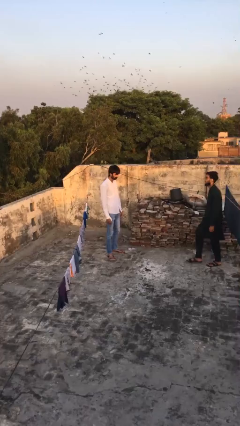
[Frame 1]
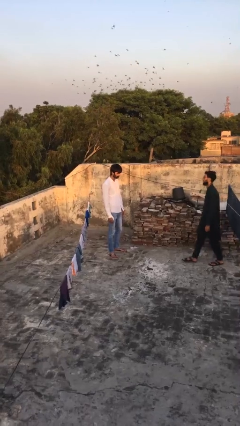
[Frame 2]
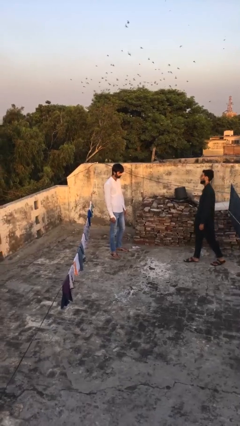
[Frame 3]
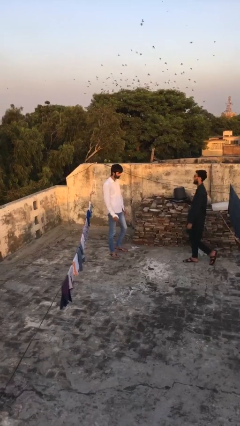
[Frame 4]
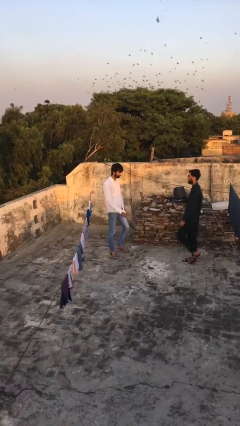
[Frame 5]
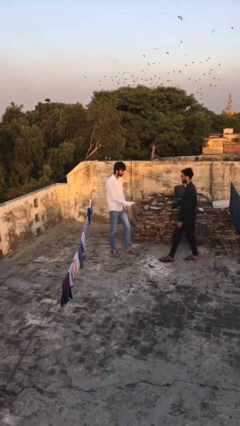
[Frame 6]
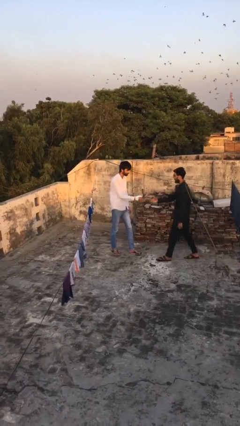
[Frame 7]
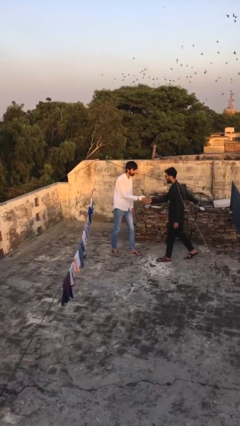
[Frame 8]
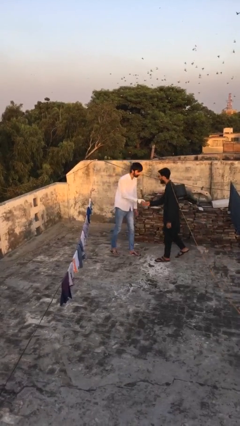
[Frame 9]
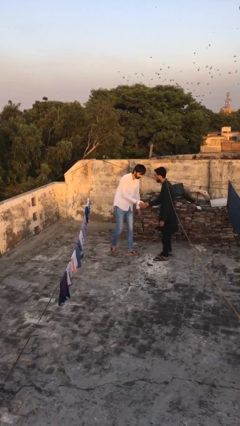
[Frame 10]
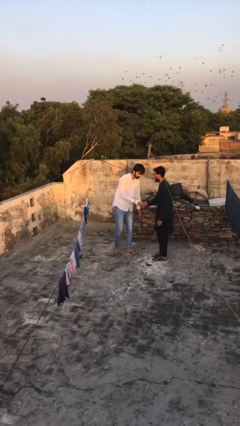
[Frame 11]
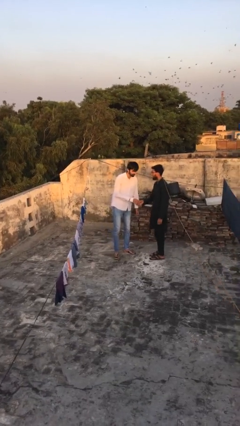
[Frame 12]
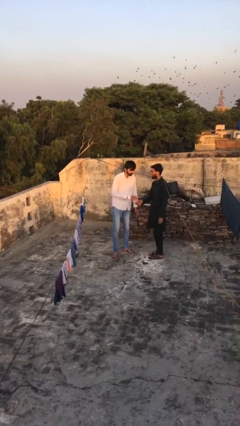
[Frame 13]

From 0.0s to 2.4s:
person shakes hand

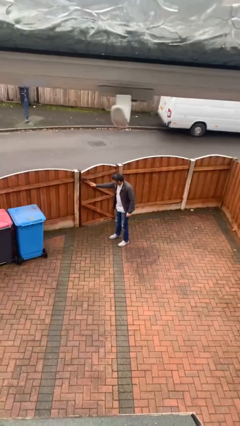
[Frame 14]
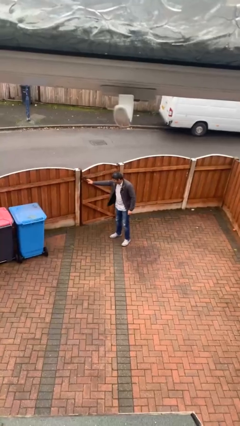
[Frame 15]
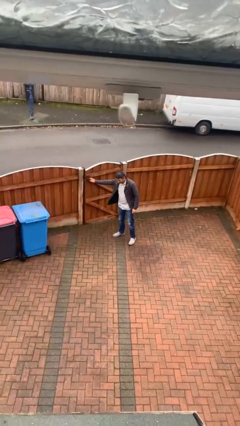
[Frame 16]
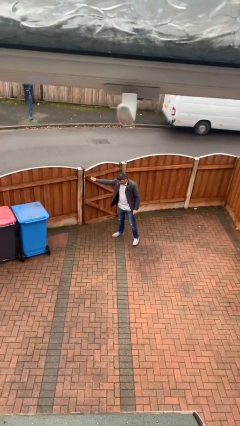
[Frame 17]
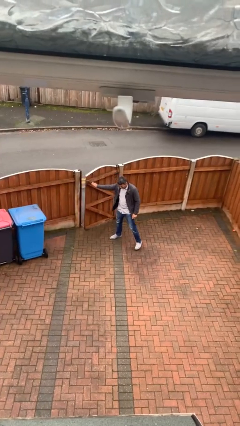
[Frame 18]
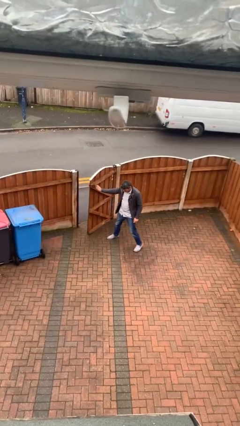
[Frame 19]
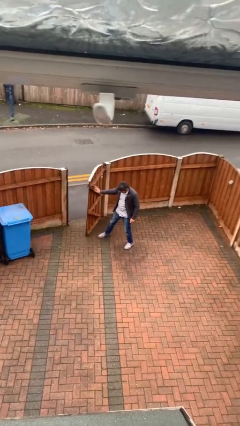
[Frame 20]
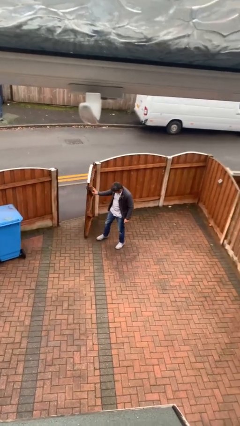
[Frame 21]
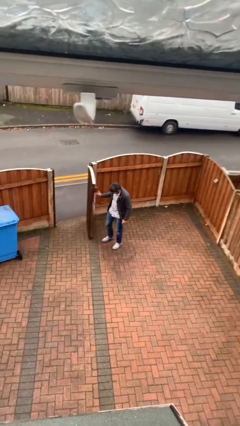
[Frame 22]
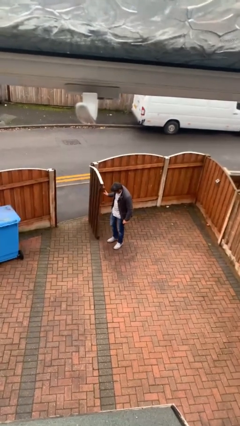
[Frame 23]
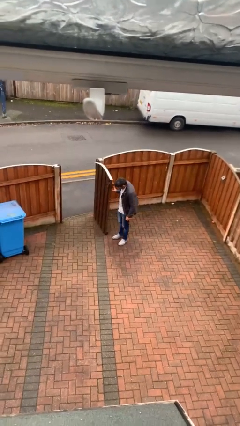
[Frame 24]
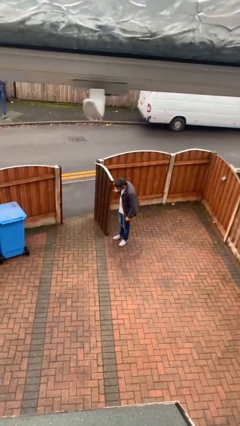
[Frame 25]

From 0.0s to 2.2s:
person opens facility door

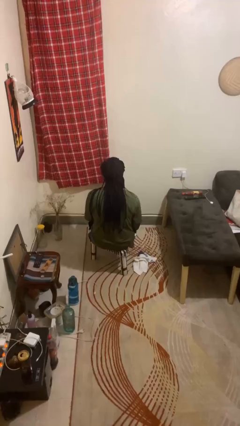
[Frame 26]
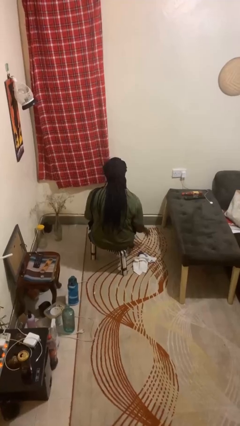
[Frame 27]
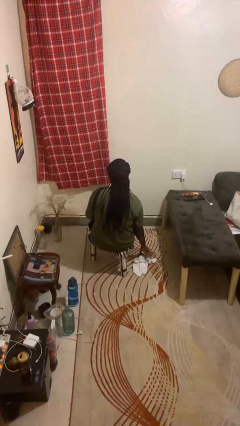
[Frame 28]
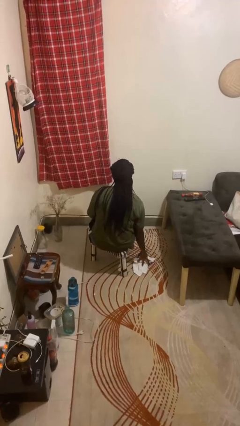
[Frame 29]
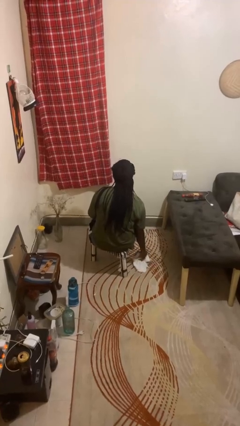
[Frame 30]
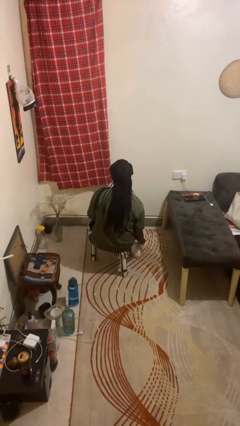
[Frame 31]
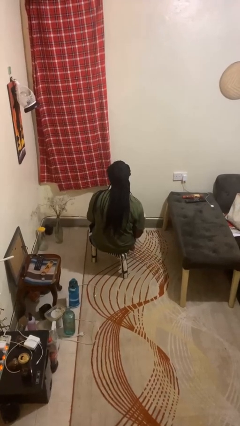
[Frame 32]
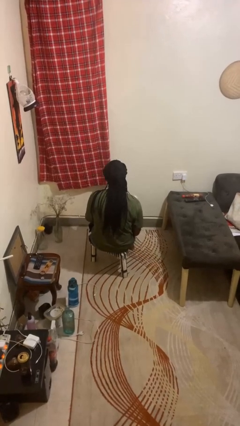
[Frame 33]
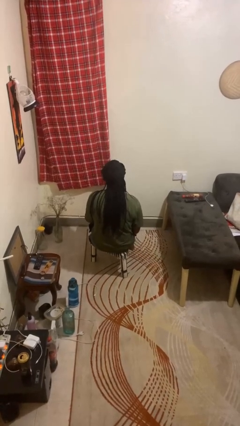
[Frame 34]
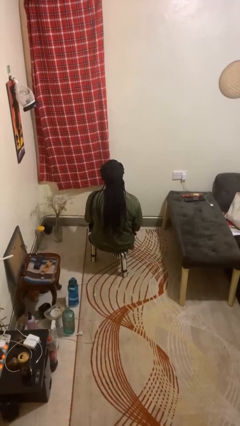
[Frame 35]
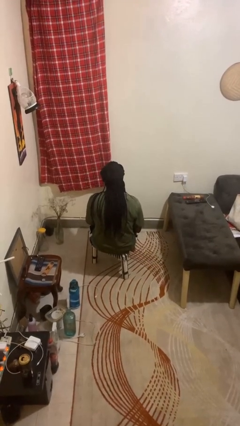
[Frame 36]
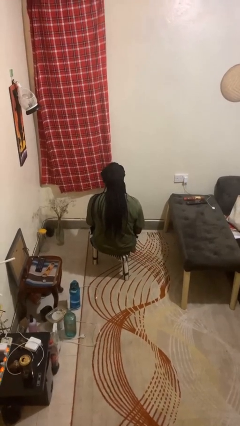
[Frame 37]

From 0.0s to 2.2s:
person picks up object from floor

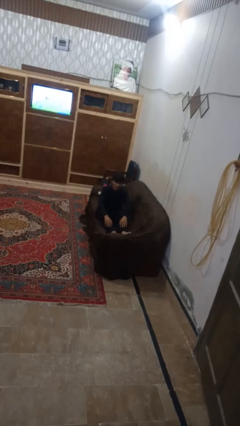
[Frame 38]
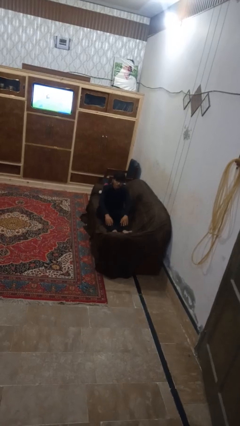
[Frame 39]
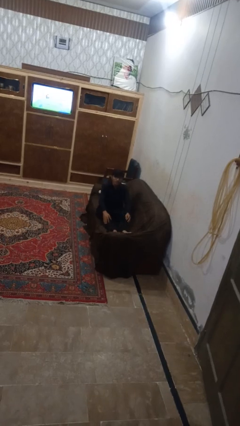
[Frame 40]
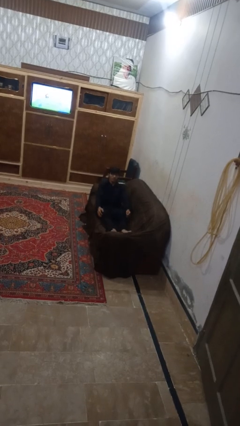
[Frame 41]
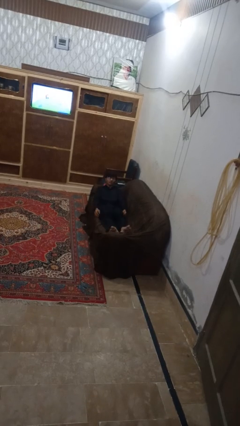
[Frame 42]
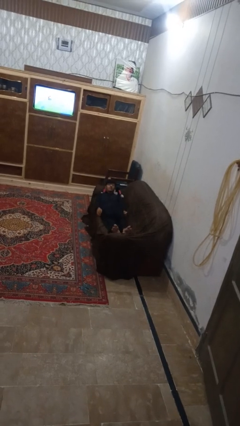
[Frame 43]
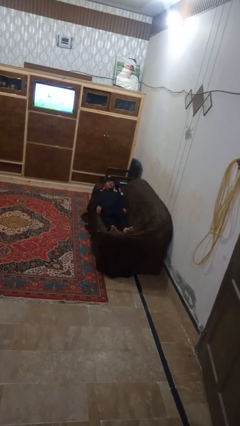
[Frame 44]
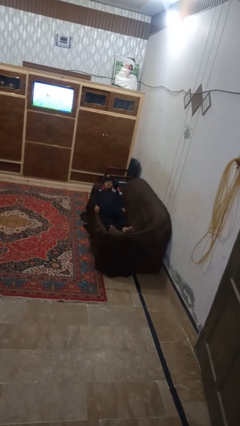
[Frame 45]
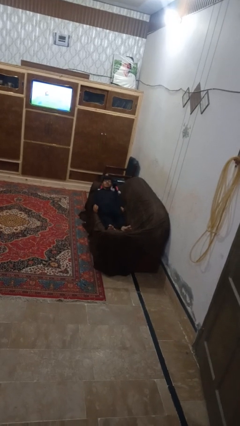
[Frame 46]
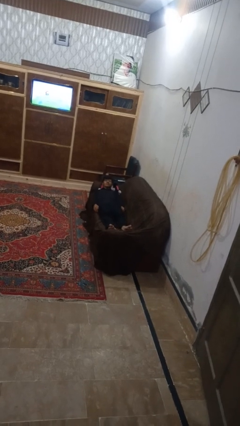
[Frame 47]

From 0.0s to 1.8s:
person lies down on couch

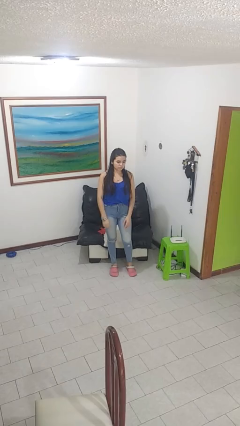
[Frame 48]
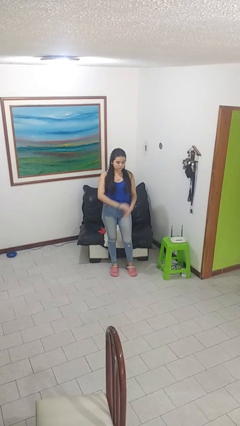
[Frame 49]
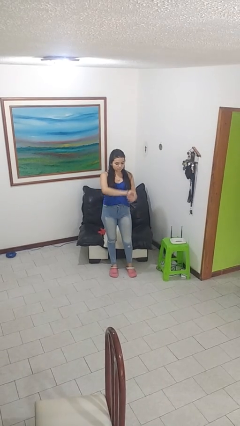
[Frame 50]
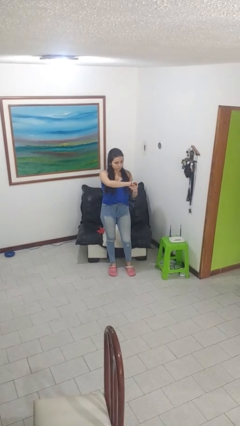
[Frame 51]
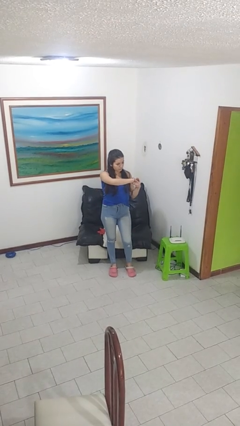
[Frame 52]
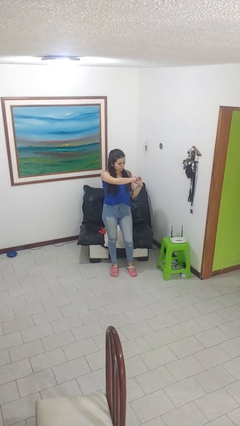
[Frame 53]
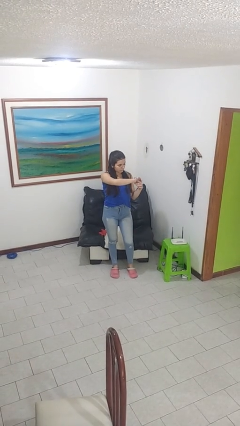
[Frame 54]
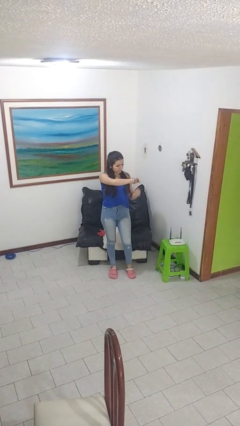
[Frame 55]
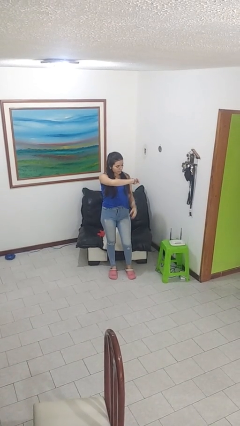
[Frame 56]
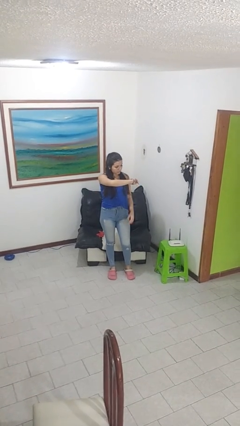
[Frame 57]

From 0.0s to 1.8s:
person looks at wristwatch

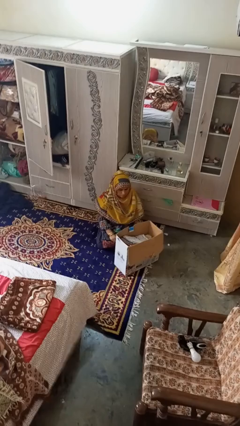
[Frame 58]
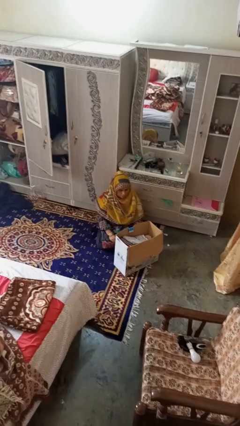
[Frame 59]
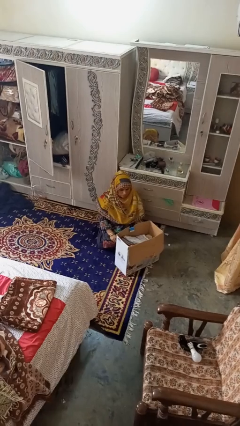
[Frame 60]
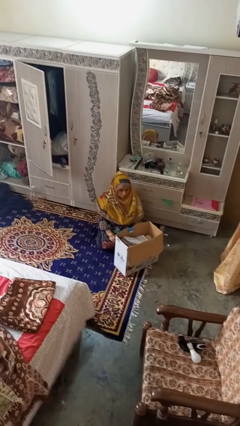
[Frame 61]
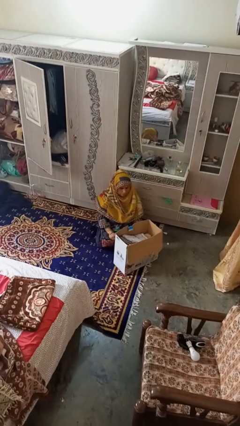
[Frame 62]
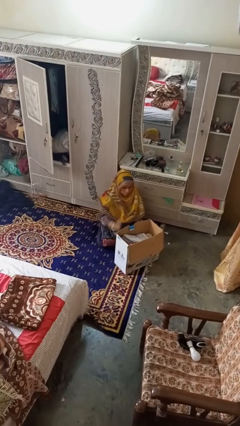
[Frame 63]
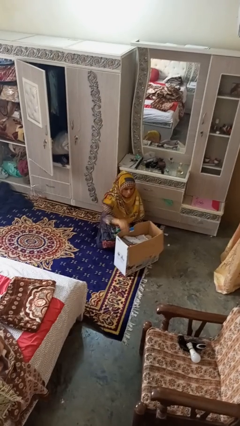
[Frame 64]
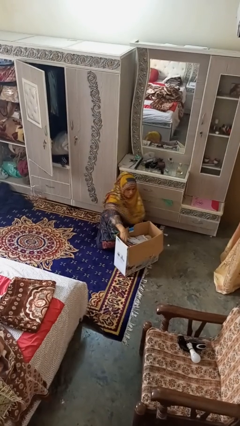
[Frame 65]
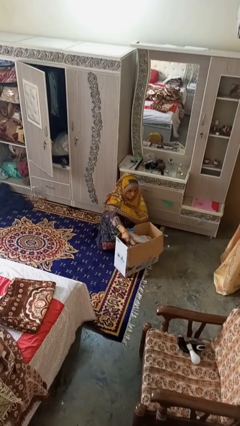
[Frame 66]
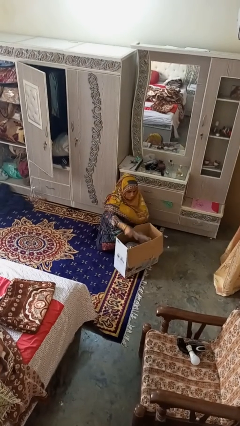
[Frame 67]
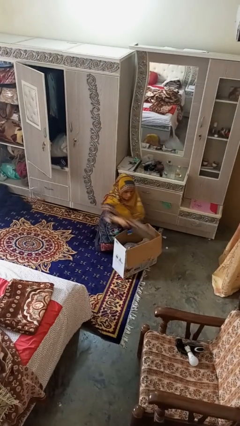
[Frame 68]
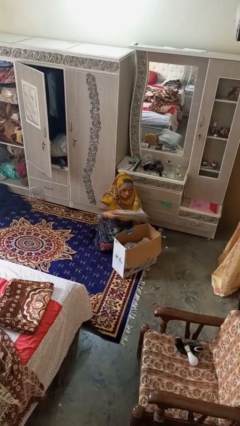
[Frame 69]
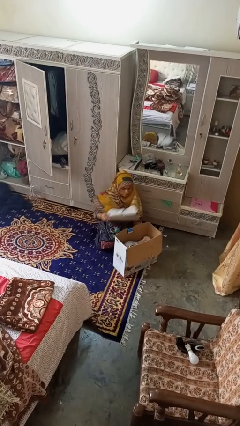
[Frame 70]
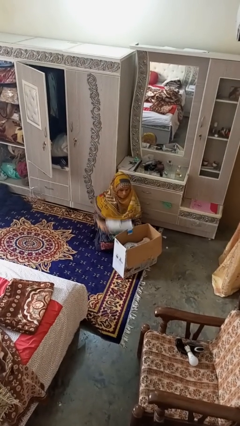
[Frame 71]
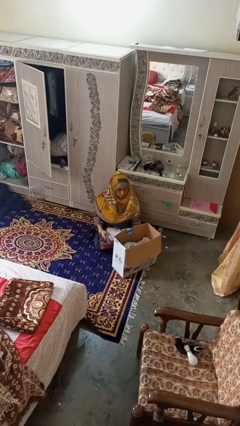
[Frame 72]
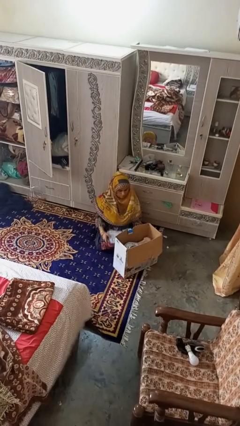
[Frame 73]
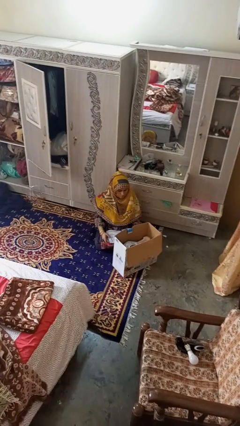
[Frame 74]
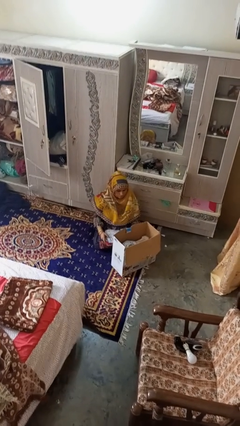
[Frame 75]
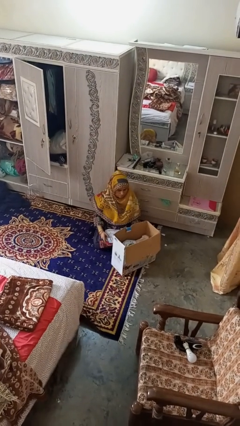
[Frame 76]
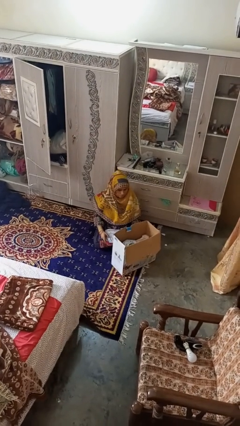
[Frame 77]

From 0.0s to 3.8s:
person takes object from box

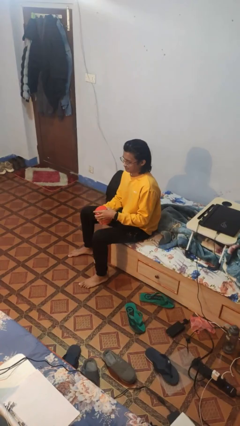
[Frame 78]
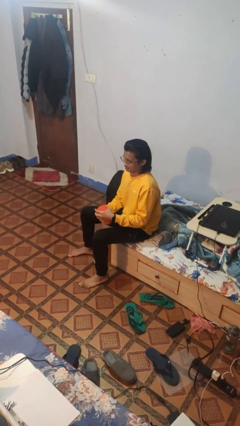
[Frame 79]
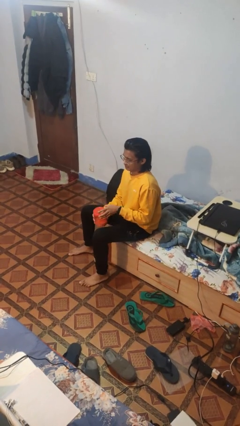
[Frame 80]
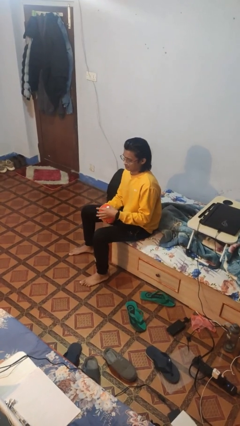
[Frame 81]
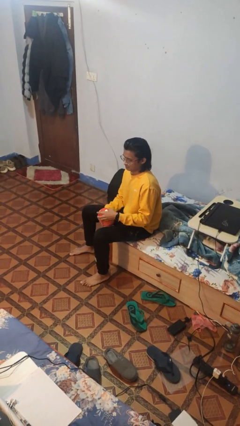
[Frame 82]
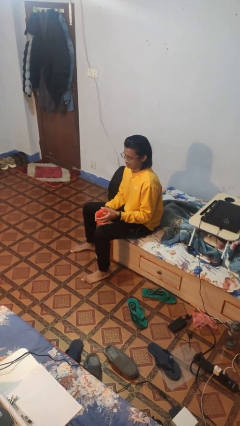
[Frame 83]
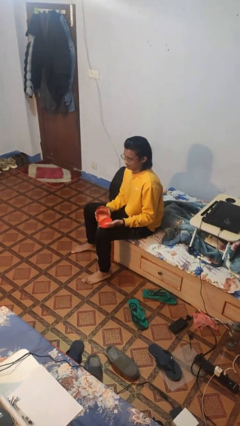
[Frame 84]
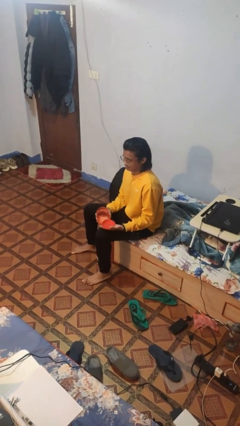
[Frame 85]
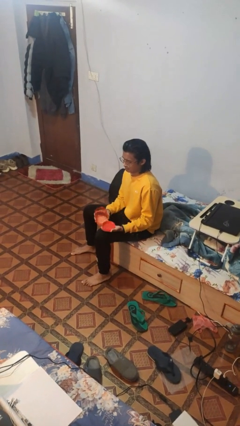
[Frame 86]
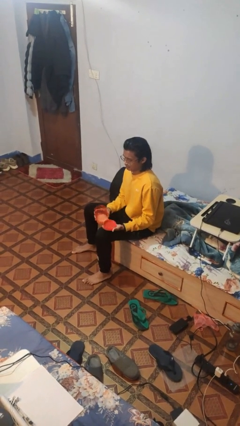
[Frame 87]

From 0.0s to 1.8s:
person opens jar

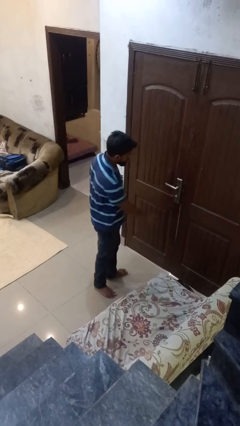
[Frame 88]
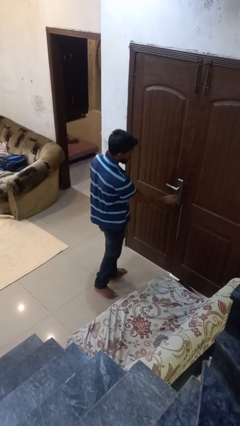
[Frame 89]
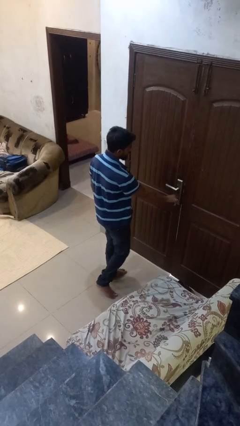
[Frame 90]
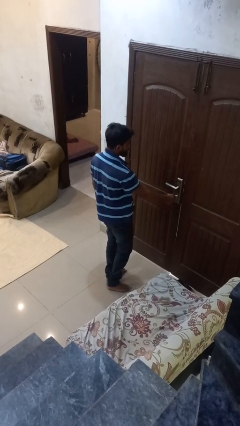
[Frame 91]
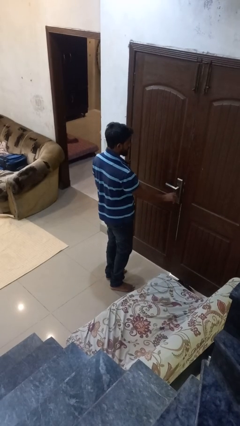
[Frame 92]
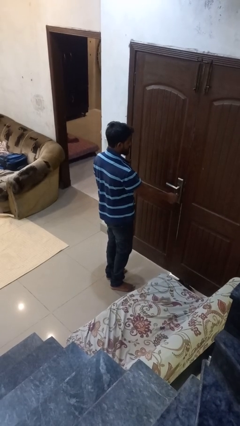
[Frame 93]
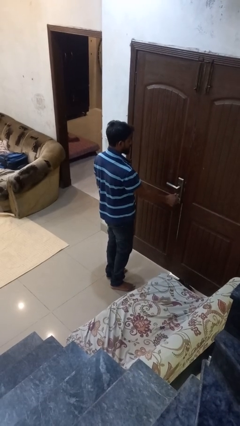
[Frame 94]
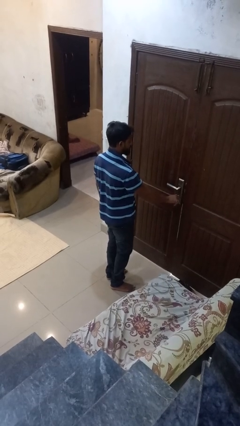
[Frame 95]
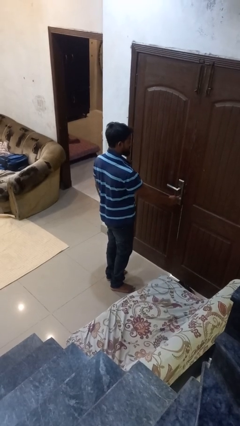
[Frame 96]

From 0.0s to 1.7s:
person locks door with keys
